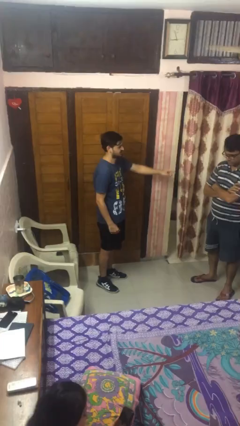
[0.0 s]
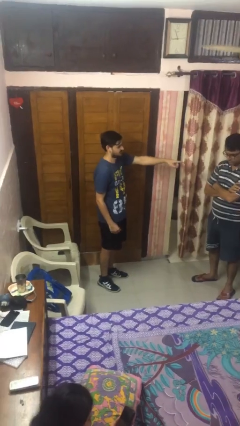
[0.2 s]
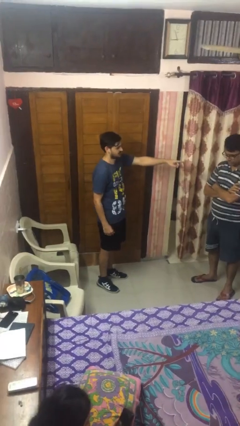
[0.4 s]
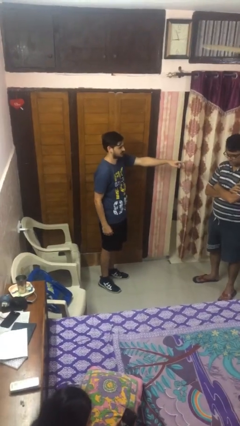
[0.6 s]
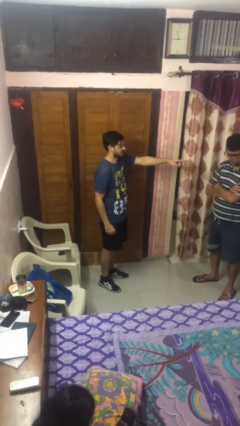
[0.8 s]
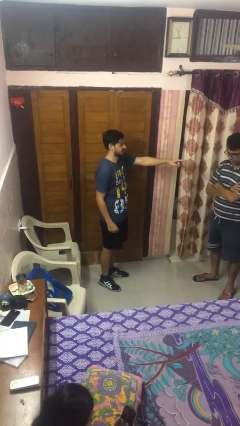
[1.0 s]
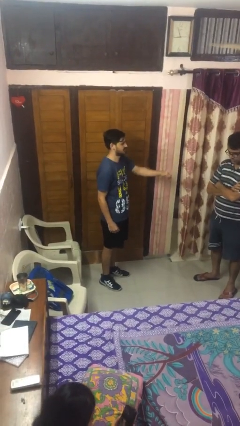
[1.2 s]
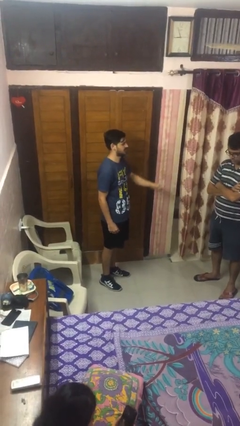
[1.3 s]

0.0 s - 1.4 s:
person points at person

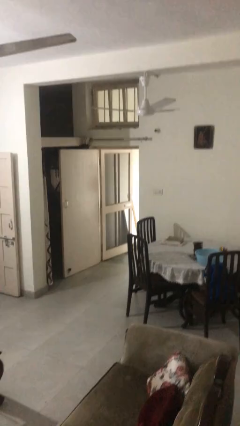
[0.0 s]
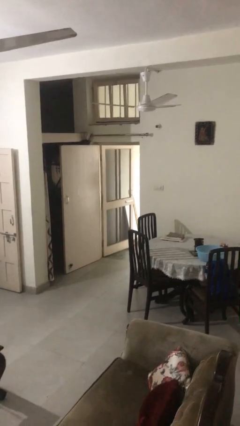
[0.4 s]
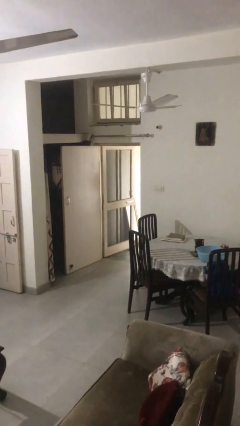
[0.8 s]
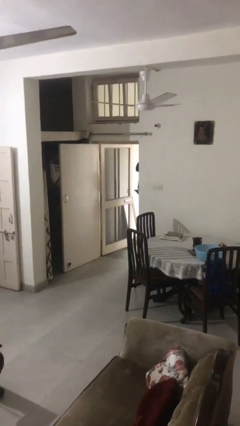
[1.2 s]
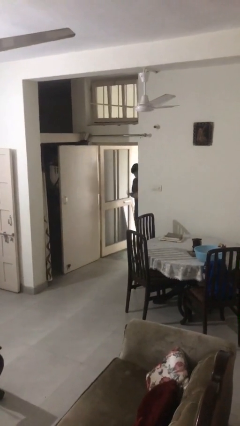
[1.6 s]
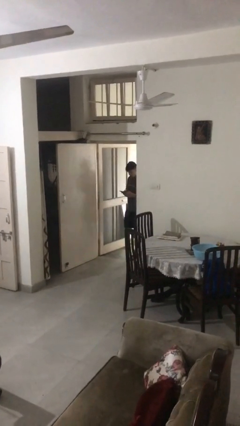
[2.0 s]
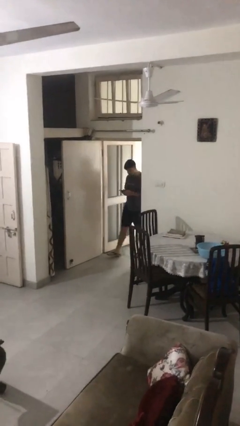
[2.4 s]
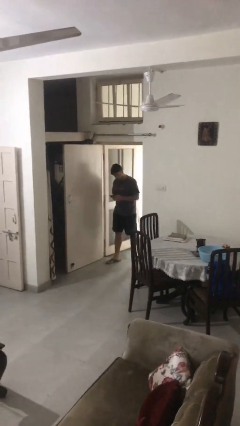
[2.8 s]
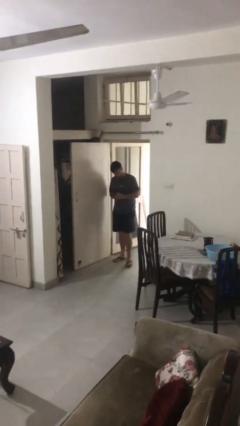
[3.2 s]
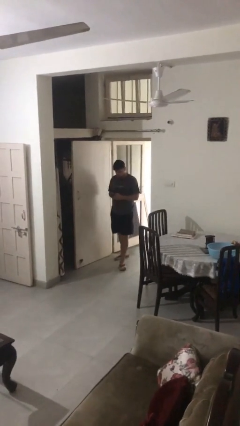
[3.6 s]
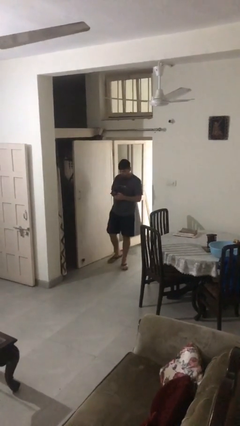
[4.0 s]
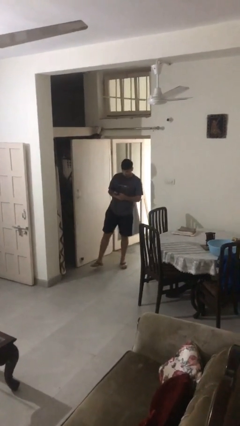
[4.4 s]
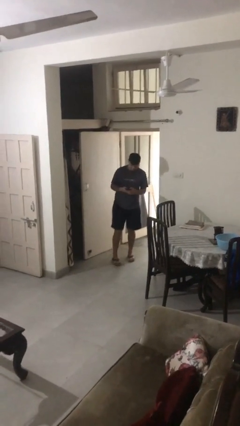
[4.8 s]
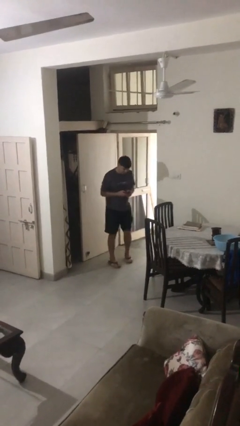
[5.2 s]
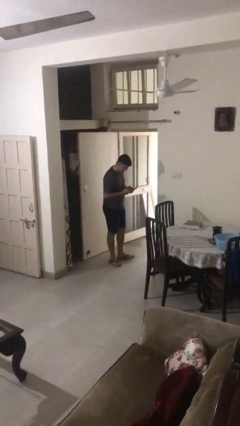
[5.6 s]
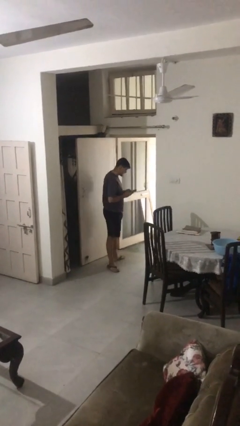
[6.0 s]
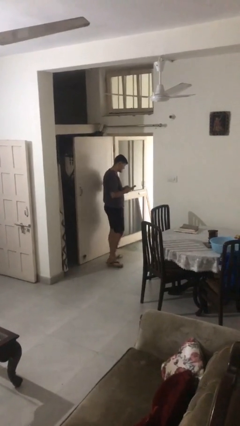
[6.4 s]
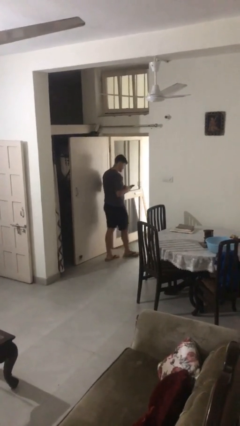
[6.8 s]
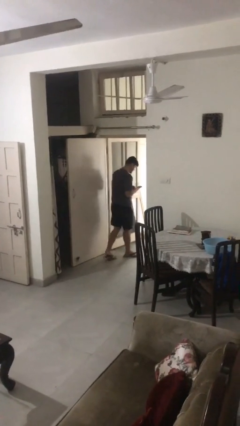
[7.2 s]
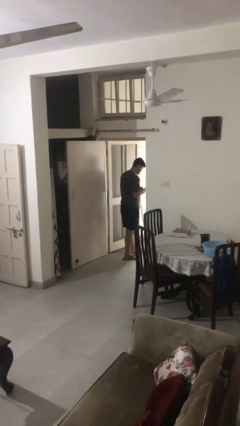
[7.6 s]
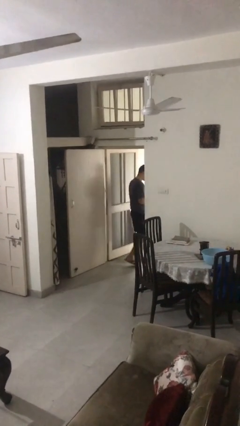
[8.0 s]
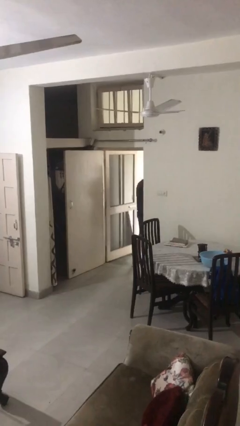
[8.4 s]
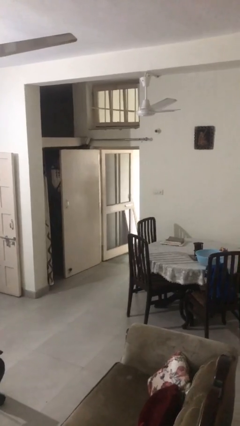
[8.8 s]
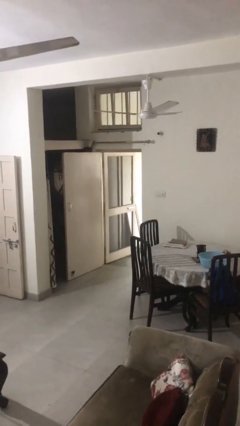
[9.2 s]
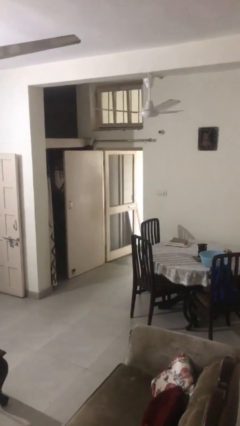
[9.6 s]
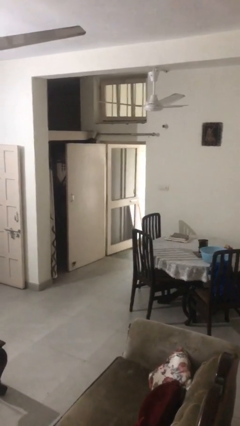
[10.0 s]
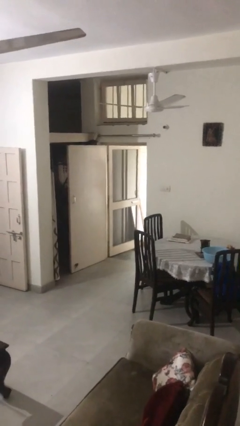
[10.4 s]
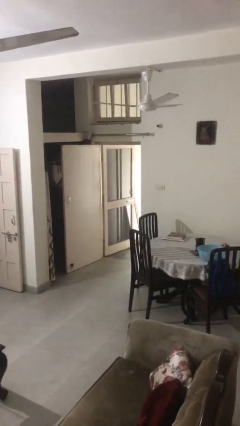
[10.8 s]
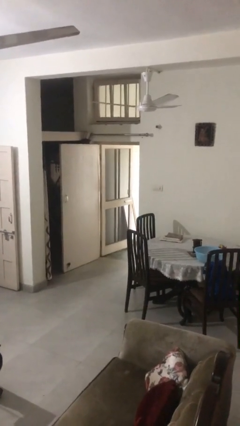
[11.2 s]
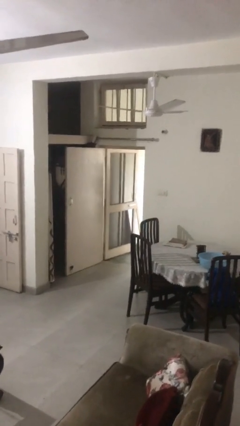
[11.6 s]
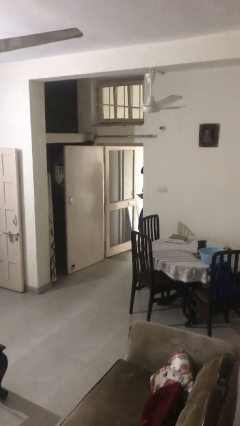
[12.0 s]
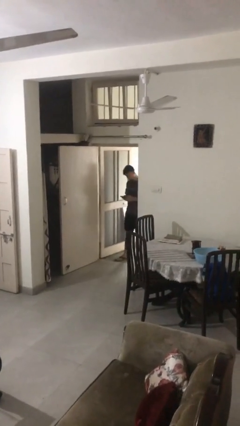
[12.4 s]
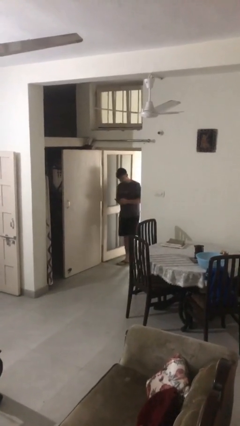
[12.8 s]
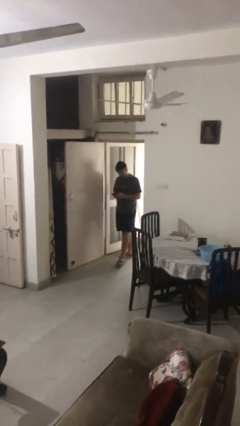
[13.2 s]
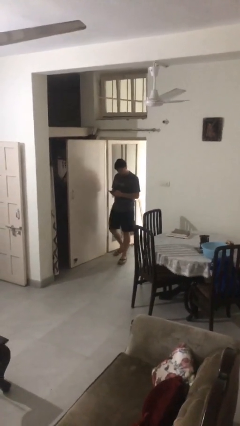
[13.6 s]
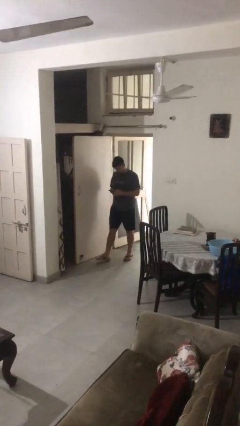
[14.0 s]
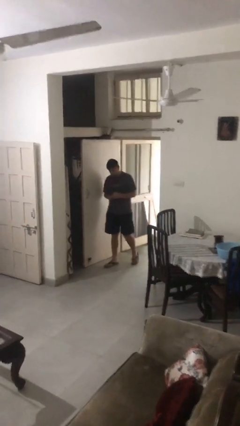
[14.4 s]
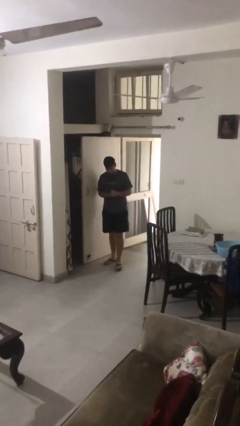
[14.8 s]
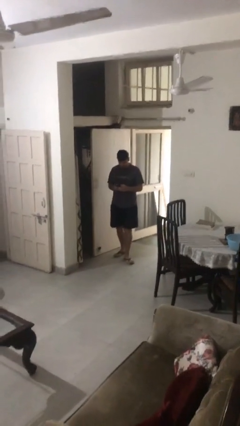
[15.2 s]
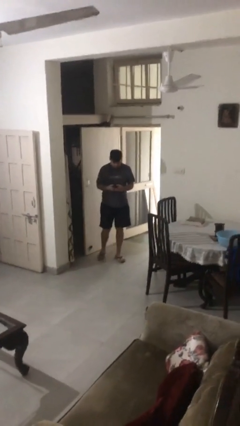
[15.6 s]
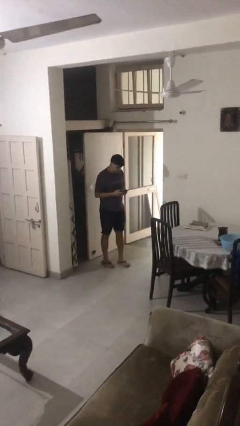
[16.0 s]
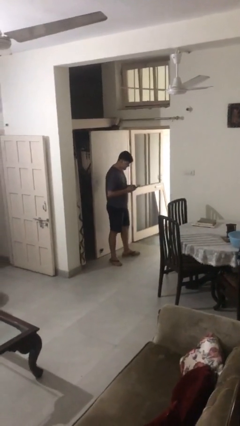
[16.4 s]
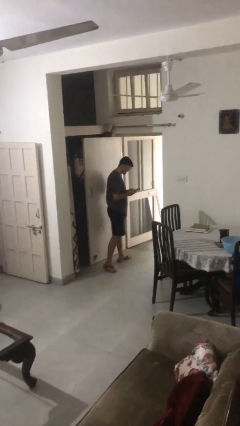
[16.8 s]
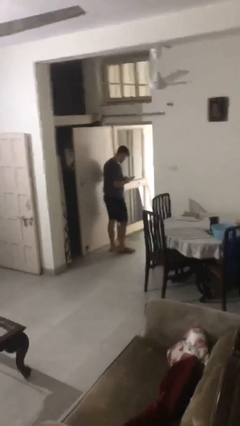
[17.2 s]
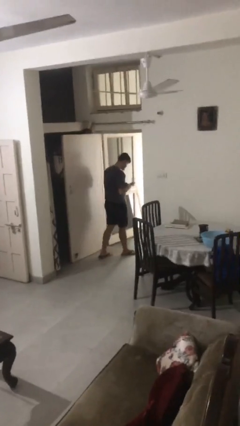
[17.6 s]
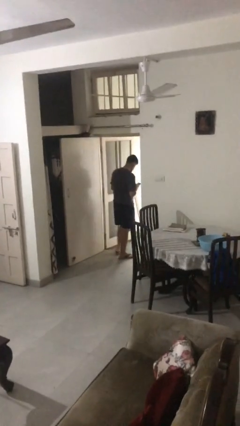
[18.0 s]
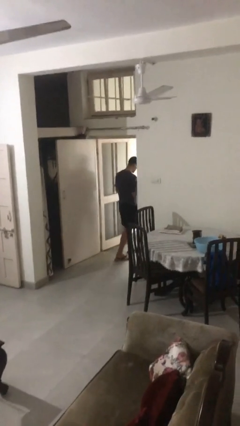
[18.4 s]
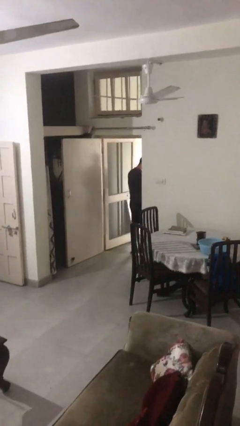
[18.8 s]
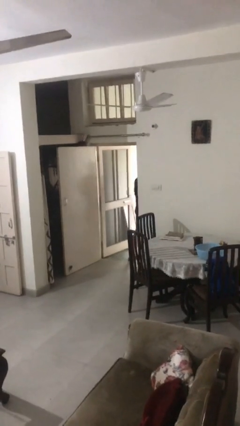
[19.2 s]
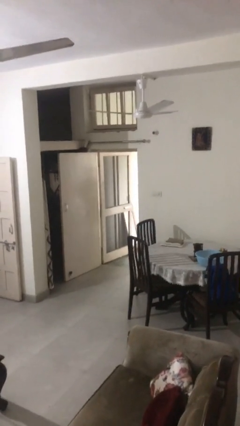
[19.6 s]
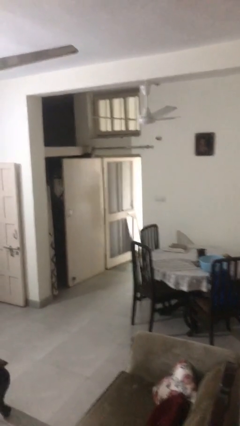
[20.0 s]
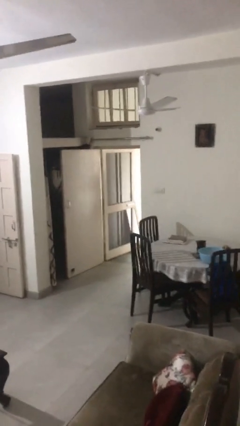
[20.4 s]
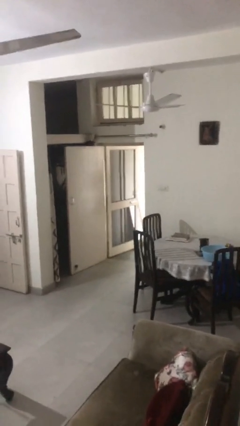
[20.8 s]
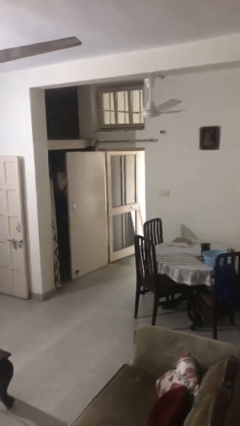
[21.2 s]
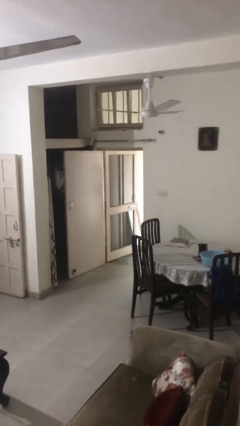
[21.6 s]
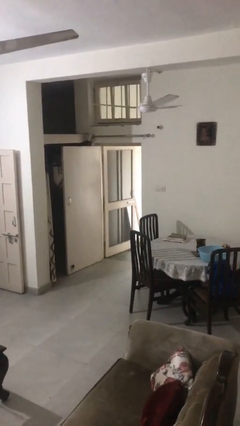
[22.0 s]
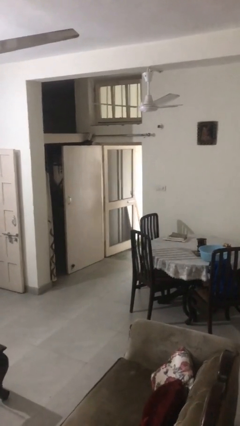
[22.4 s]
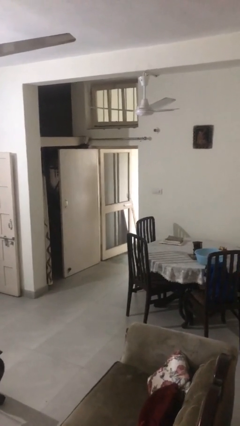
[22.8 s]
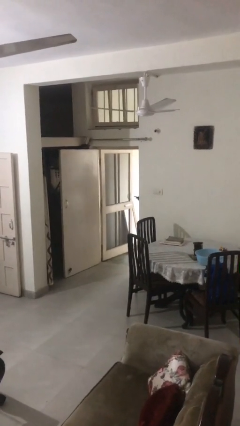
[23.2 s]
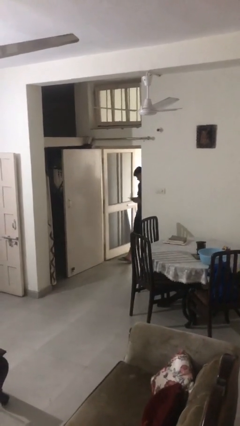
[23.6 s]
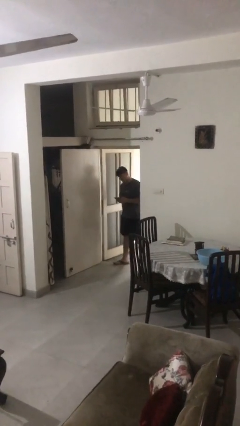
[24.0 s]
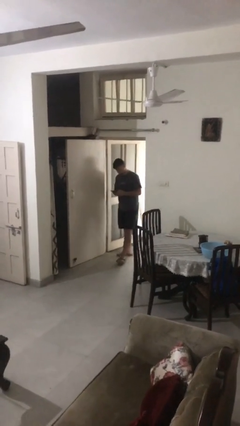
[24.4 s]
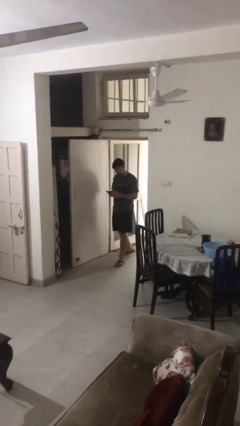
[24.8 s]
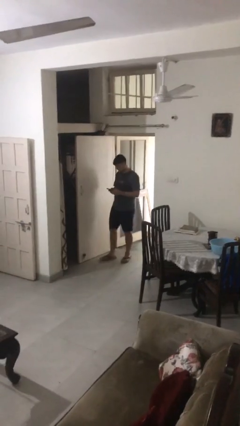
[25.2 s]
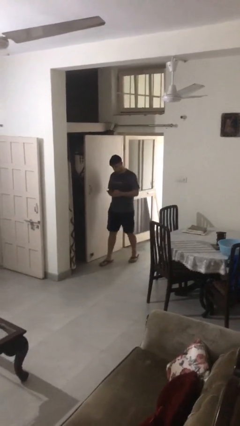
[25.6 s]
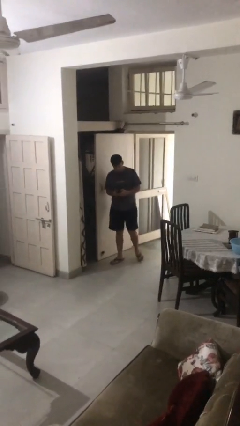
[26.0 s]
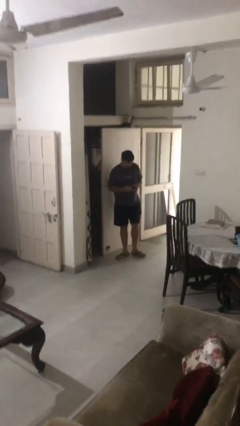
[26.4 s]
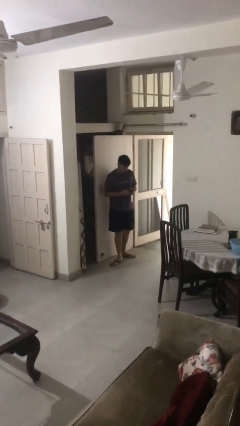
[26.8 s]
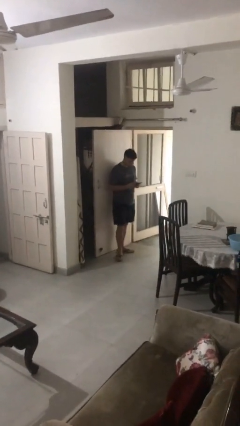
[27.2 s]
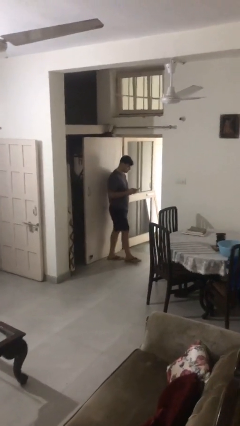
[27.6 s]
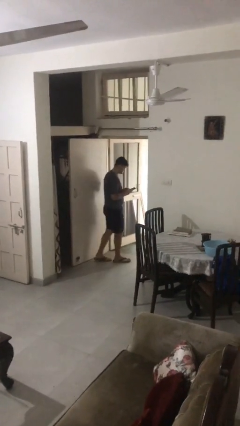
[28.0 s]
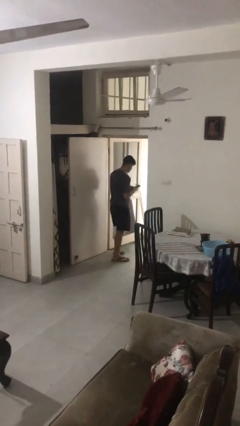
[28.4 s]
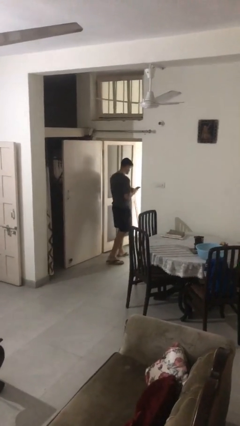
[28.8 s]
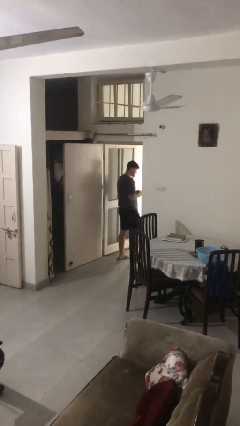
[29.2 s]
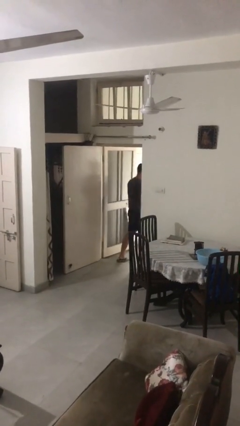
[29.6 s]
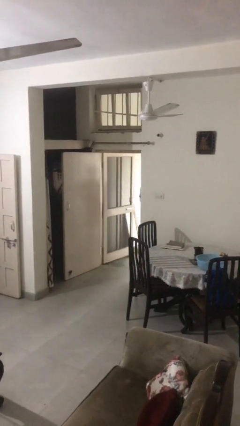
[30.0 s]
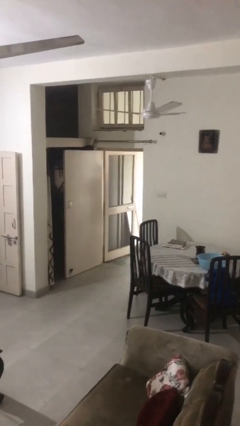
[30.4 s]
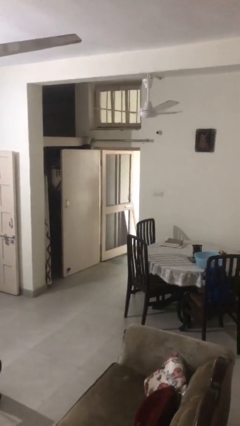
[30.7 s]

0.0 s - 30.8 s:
person texts on phone

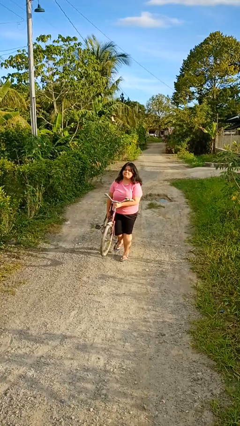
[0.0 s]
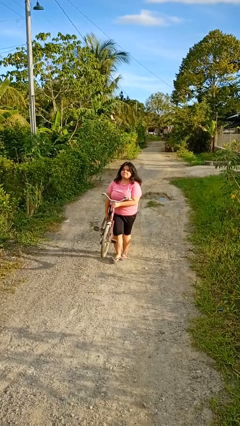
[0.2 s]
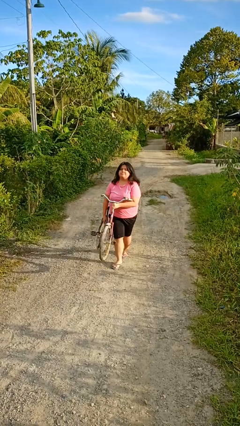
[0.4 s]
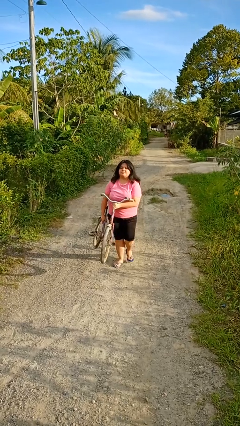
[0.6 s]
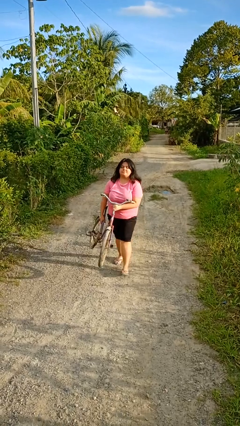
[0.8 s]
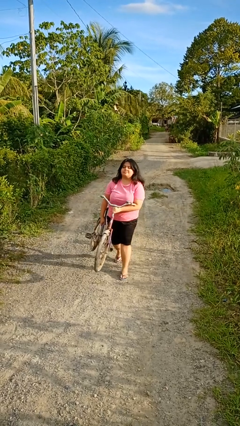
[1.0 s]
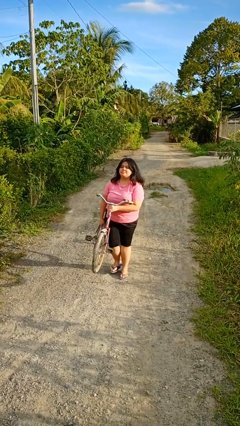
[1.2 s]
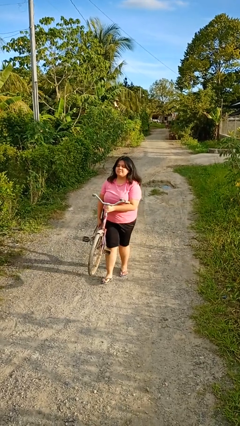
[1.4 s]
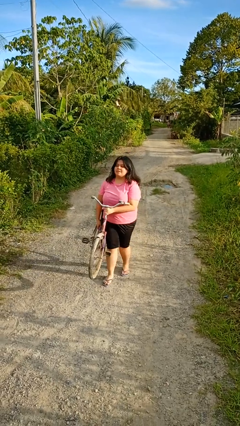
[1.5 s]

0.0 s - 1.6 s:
person carries bicycle
